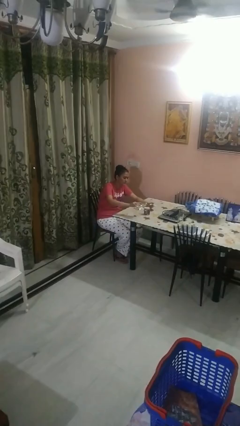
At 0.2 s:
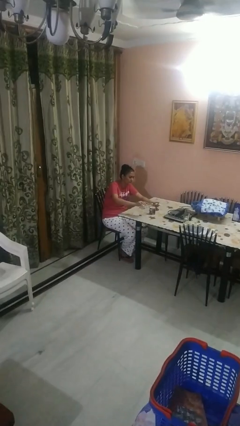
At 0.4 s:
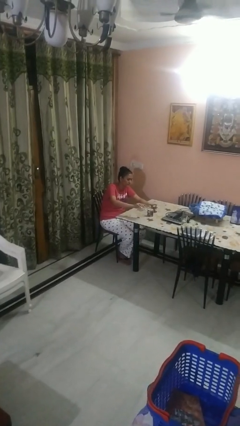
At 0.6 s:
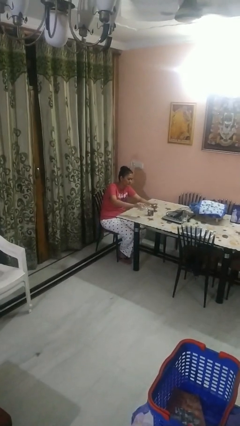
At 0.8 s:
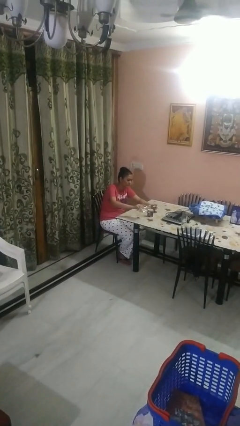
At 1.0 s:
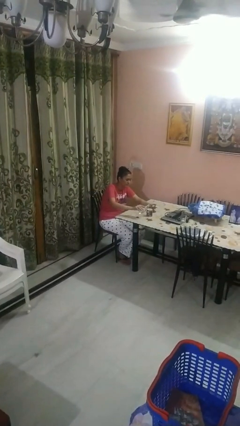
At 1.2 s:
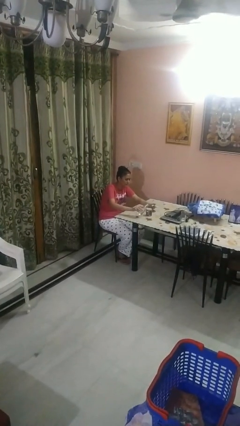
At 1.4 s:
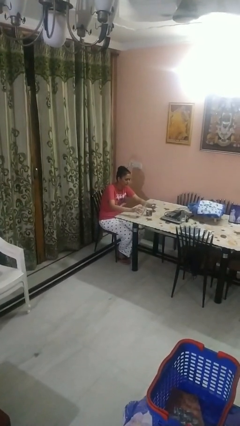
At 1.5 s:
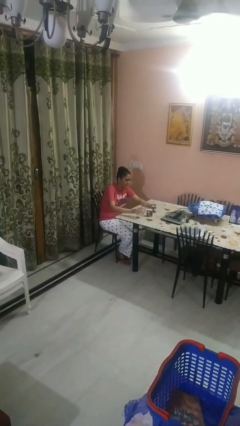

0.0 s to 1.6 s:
person pours liquid into cup

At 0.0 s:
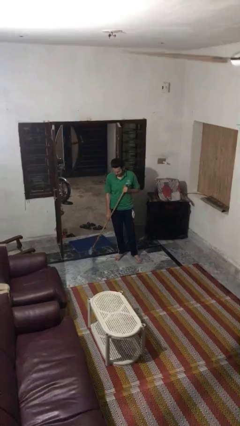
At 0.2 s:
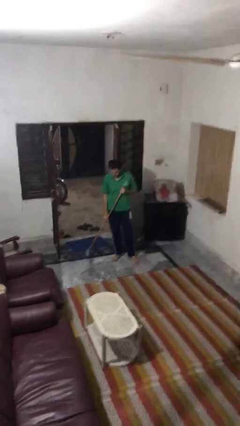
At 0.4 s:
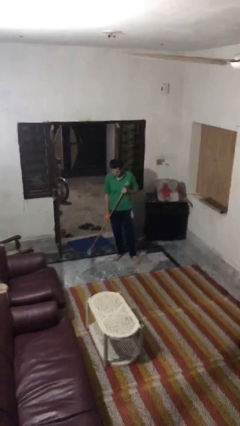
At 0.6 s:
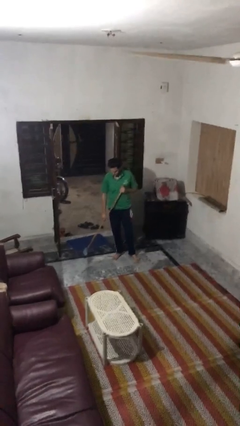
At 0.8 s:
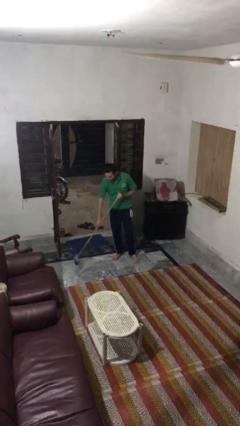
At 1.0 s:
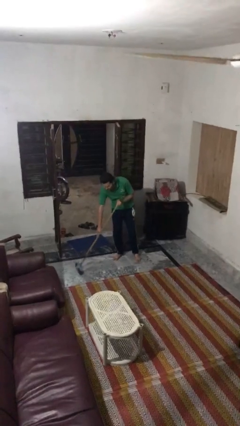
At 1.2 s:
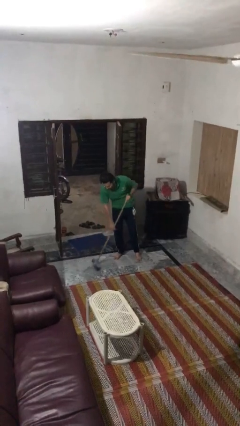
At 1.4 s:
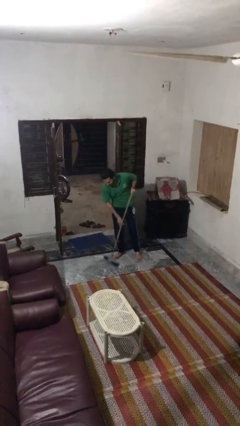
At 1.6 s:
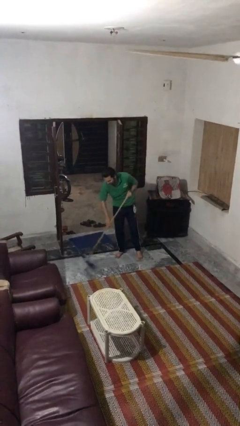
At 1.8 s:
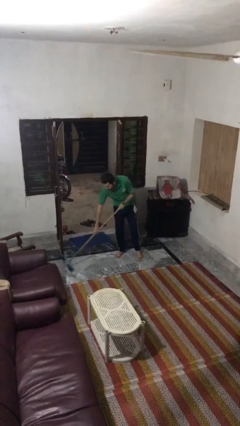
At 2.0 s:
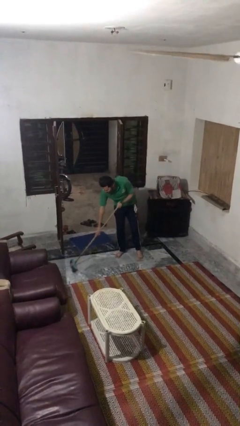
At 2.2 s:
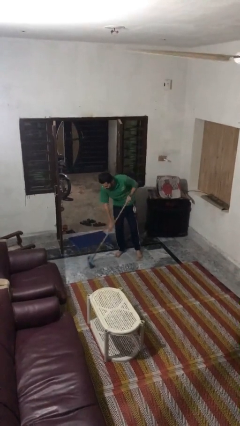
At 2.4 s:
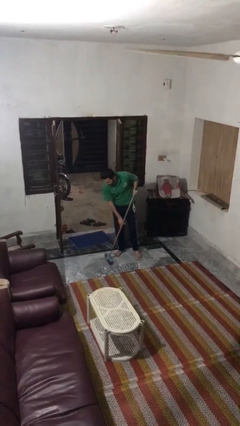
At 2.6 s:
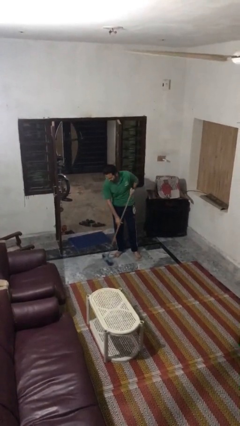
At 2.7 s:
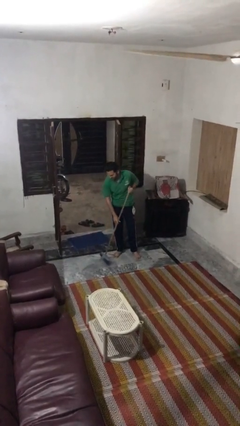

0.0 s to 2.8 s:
person sweeps floor

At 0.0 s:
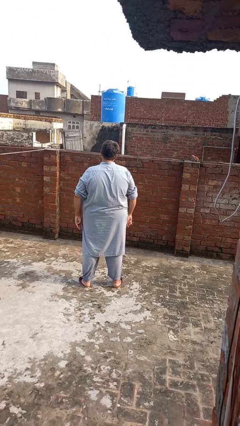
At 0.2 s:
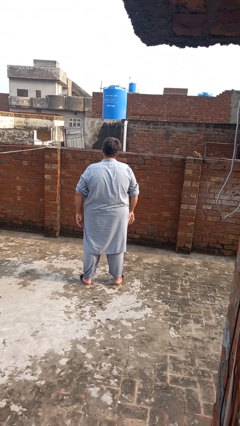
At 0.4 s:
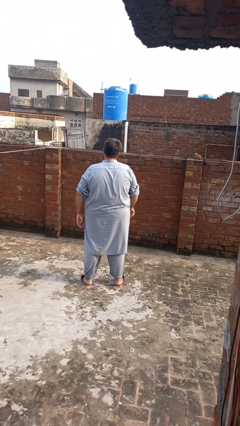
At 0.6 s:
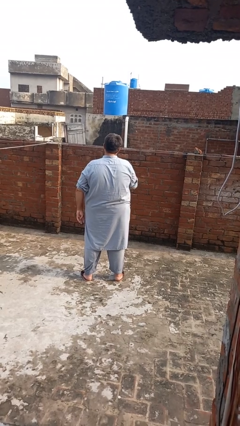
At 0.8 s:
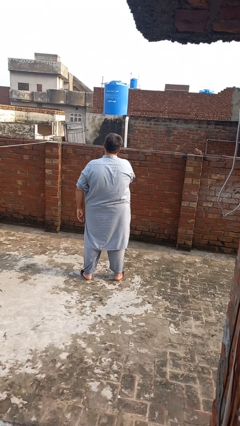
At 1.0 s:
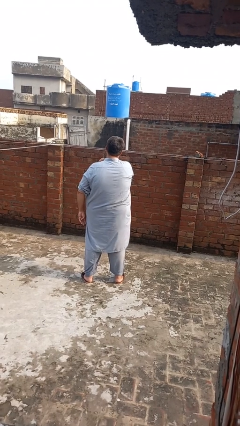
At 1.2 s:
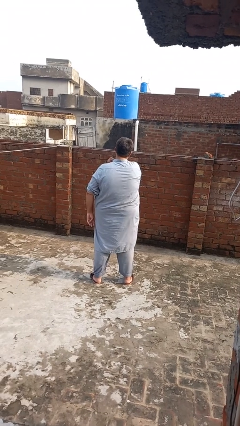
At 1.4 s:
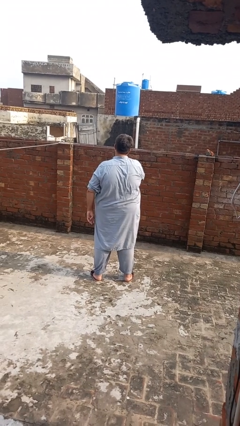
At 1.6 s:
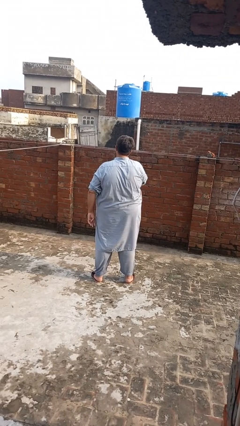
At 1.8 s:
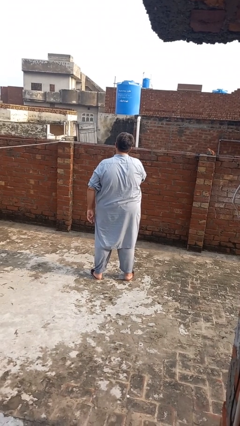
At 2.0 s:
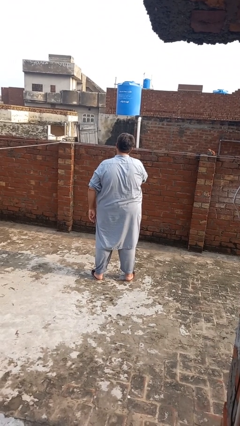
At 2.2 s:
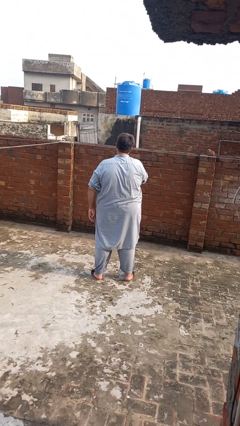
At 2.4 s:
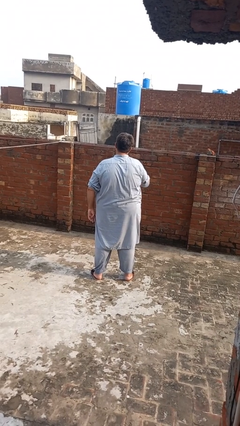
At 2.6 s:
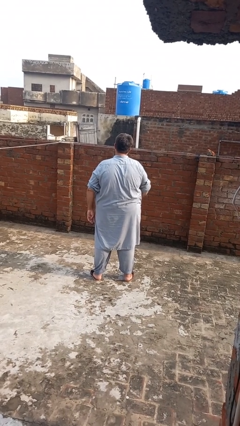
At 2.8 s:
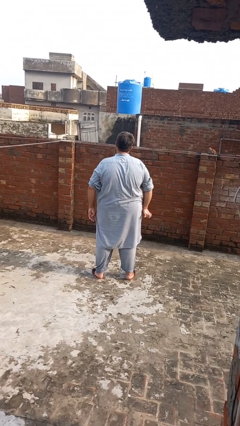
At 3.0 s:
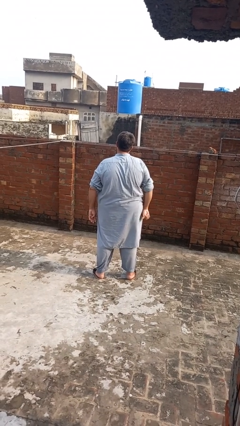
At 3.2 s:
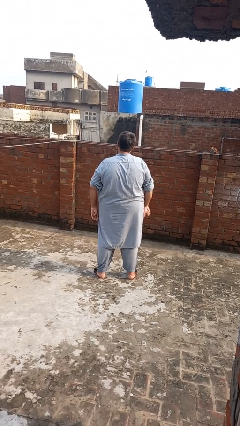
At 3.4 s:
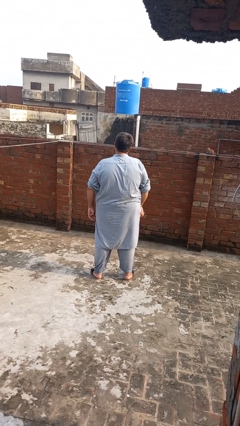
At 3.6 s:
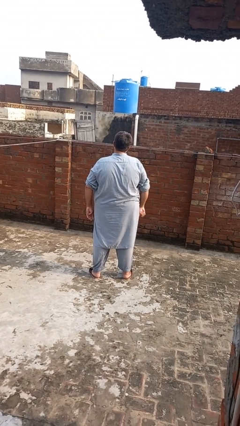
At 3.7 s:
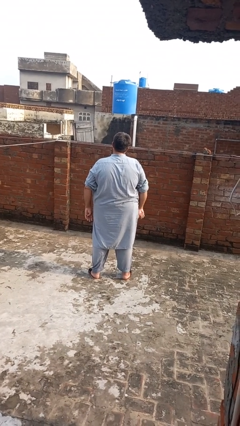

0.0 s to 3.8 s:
person gestures cut

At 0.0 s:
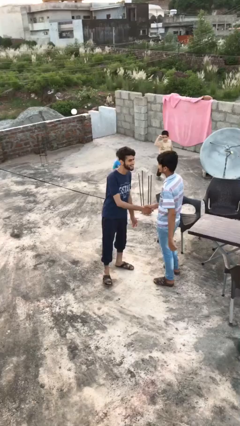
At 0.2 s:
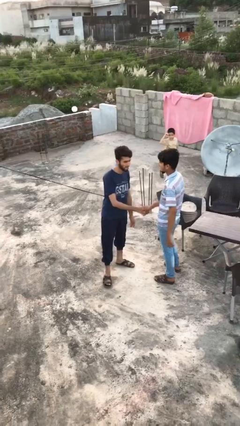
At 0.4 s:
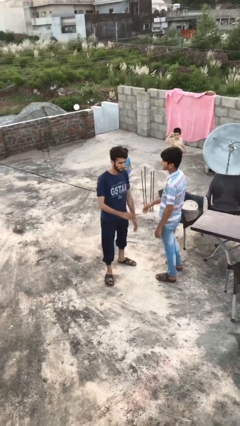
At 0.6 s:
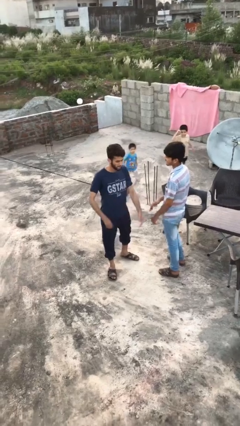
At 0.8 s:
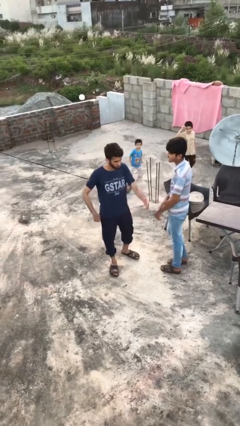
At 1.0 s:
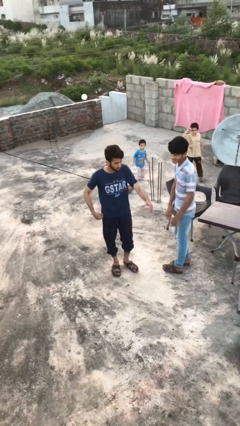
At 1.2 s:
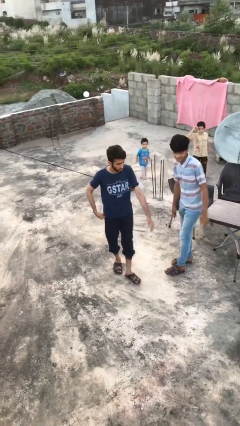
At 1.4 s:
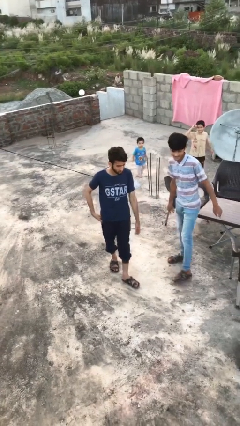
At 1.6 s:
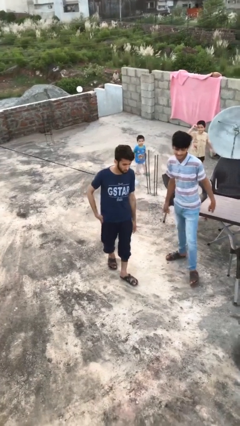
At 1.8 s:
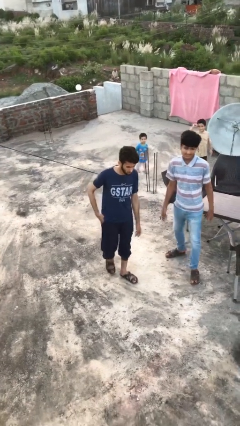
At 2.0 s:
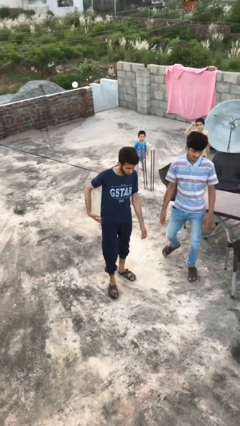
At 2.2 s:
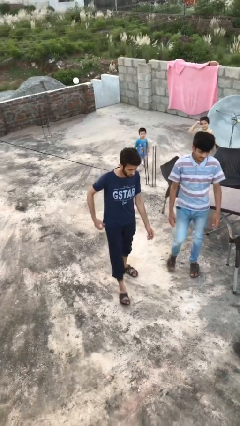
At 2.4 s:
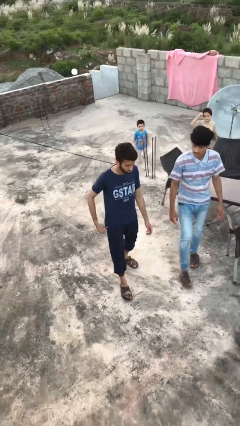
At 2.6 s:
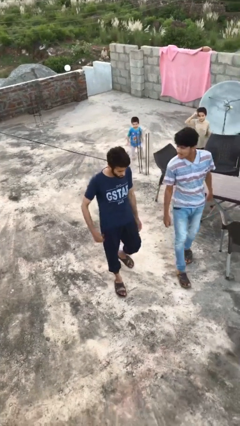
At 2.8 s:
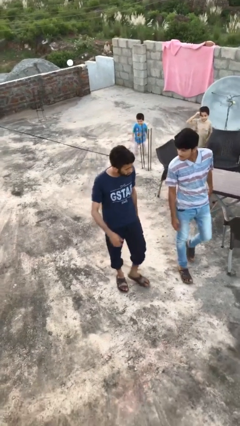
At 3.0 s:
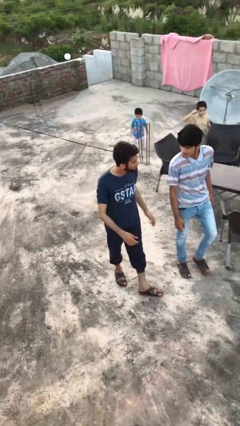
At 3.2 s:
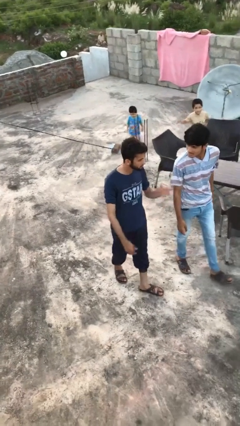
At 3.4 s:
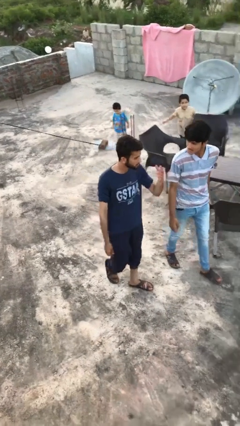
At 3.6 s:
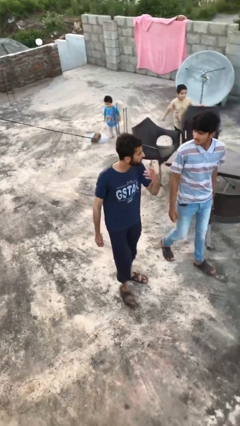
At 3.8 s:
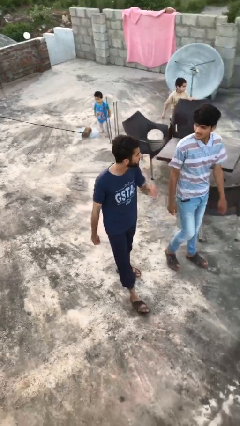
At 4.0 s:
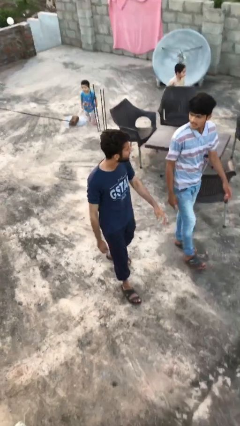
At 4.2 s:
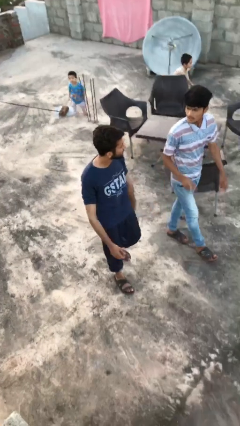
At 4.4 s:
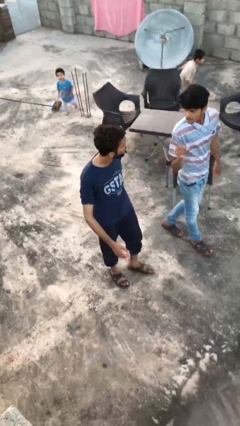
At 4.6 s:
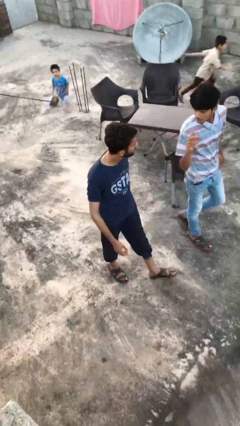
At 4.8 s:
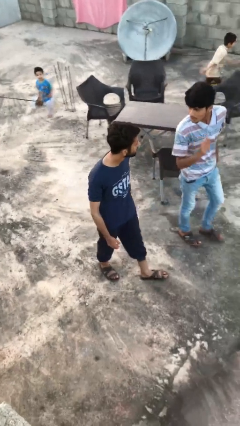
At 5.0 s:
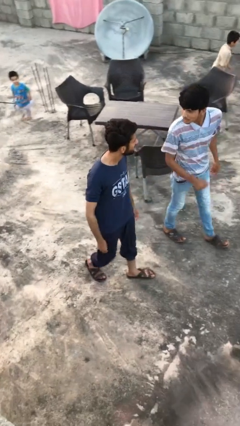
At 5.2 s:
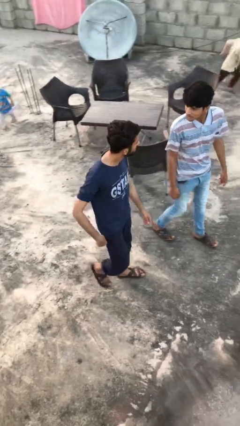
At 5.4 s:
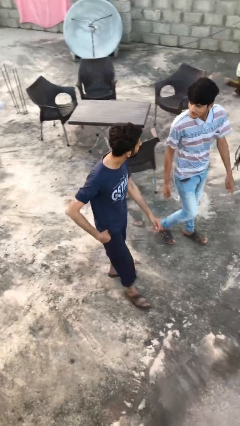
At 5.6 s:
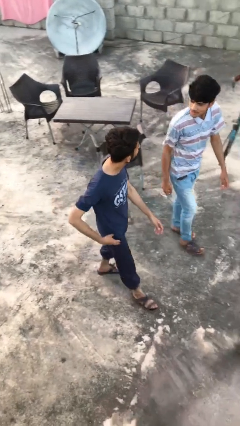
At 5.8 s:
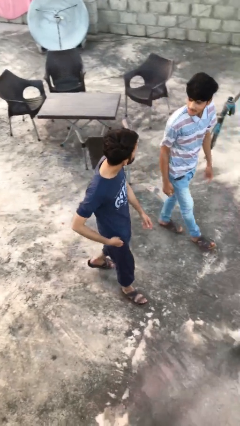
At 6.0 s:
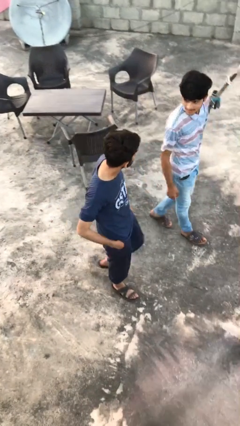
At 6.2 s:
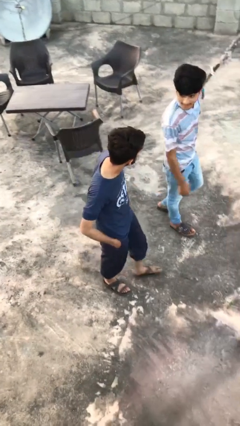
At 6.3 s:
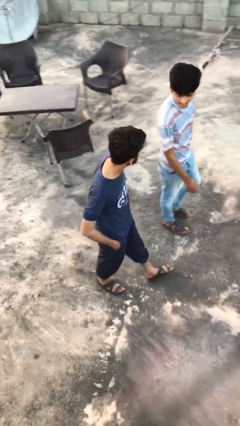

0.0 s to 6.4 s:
person talks to person

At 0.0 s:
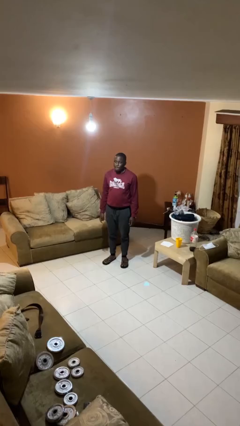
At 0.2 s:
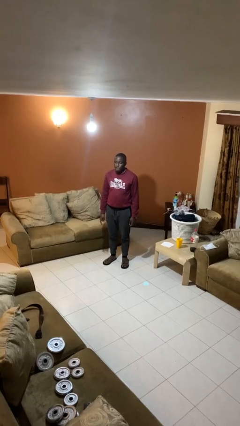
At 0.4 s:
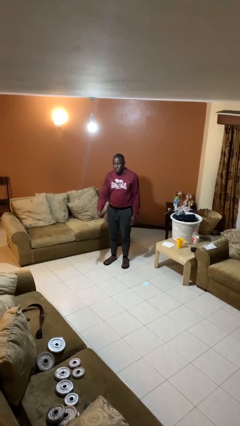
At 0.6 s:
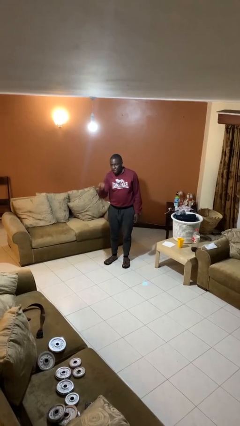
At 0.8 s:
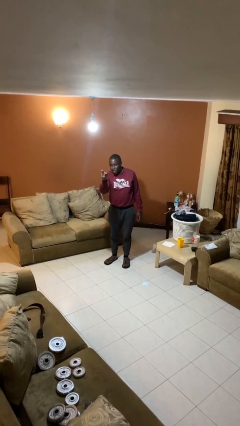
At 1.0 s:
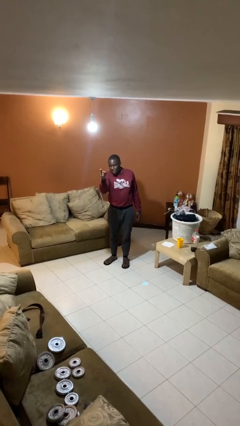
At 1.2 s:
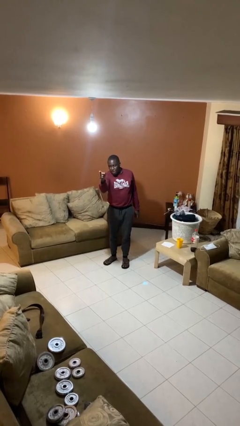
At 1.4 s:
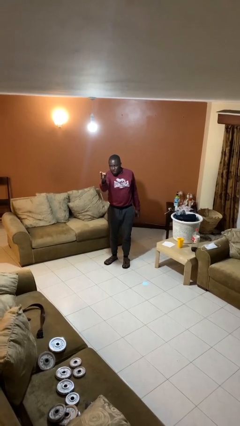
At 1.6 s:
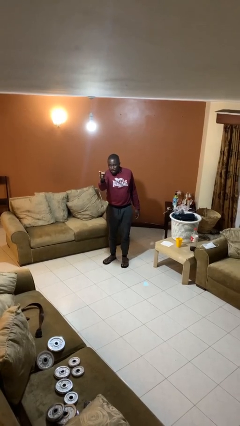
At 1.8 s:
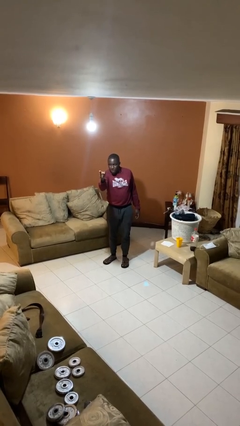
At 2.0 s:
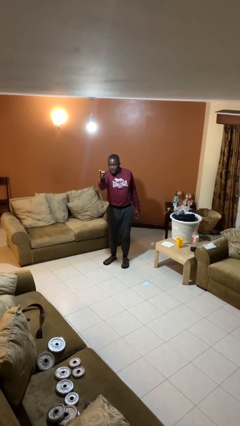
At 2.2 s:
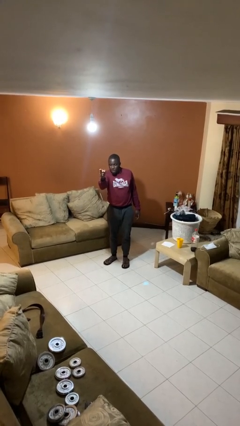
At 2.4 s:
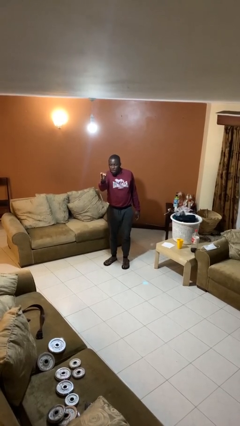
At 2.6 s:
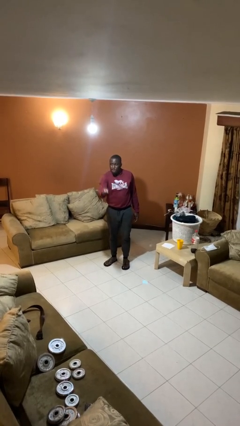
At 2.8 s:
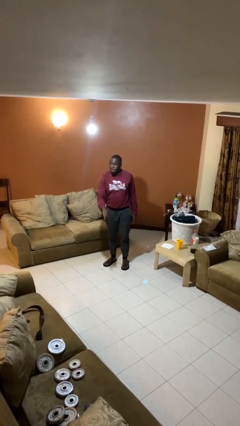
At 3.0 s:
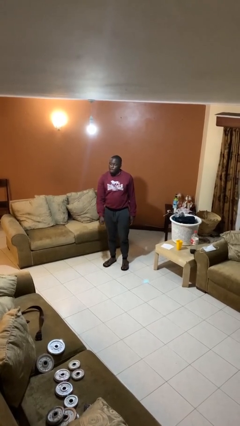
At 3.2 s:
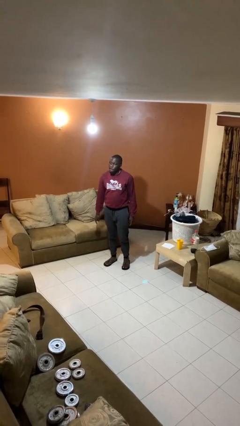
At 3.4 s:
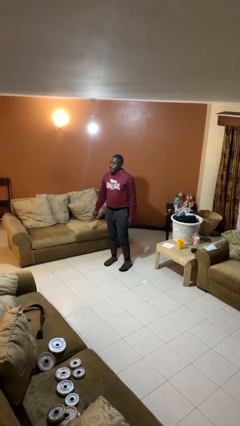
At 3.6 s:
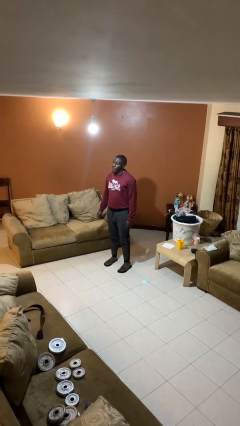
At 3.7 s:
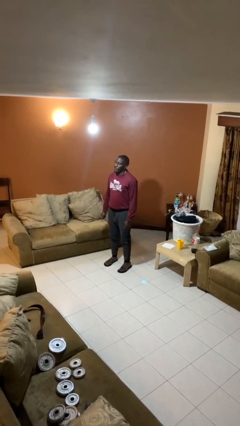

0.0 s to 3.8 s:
person points at person
